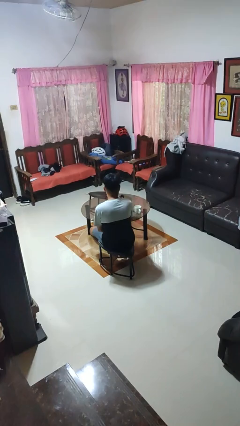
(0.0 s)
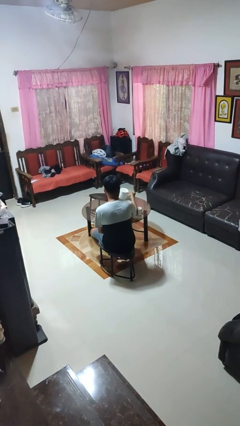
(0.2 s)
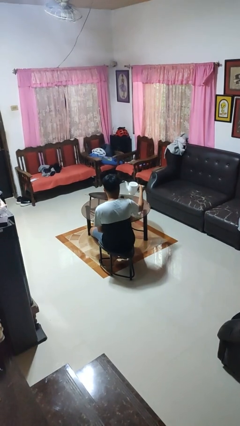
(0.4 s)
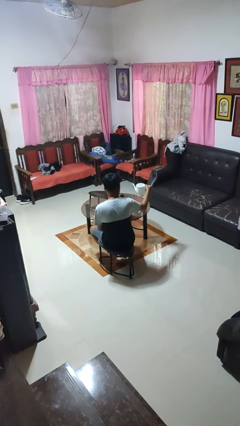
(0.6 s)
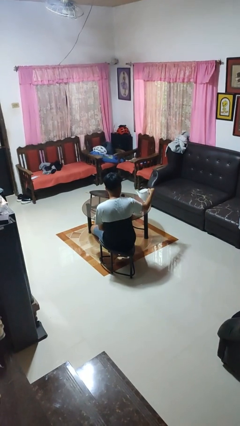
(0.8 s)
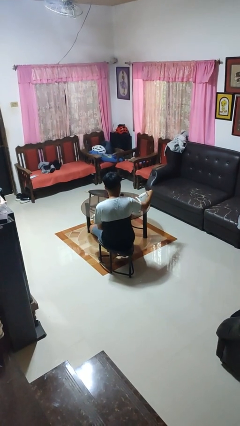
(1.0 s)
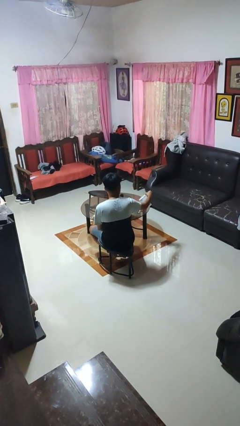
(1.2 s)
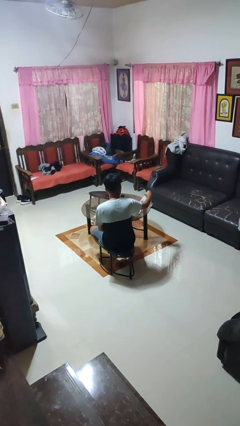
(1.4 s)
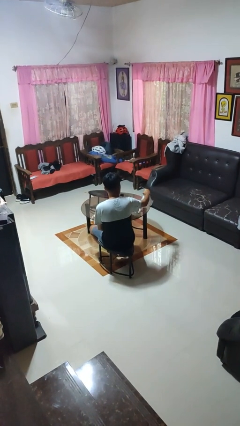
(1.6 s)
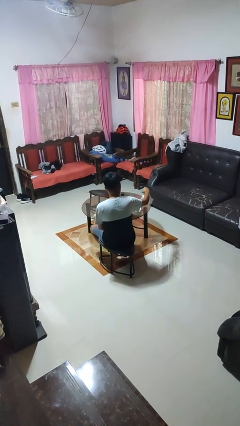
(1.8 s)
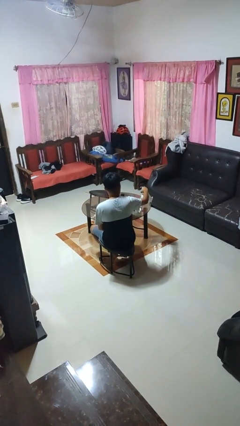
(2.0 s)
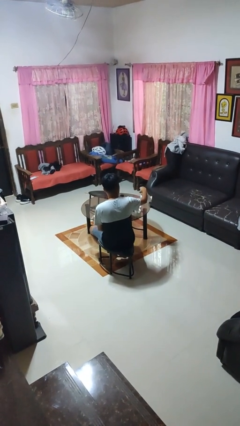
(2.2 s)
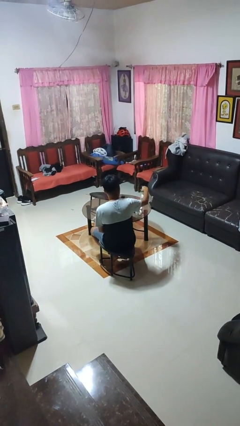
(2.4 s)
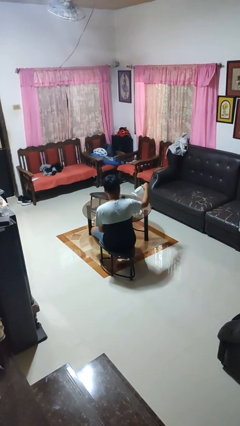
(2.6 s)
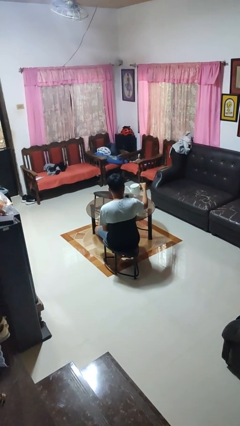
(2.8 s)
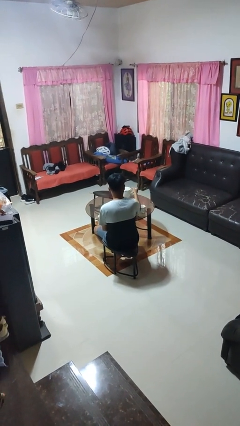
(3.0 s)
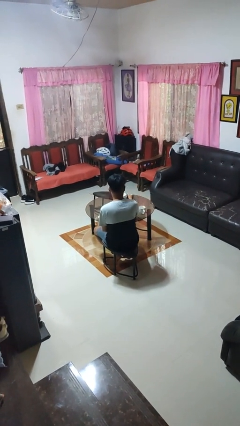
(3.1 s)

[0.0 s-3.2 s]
person pours coffee into mug

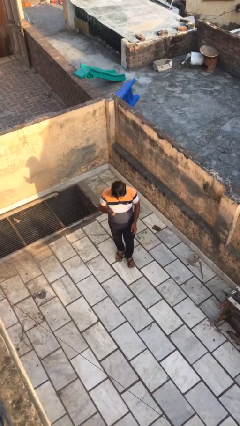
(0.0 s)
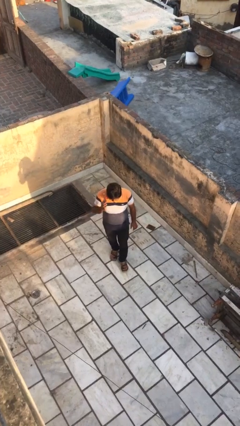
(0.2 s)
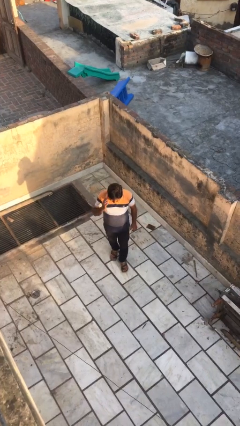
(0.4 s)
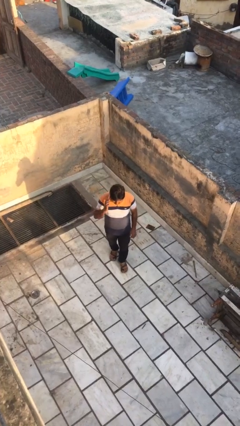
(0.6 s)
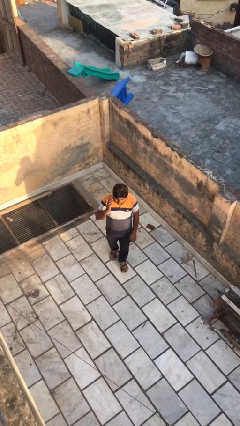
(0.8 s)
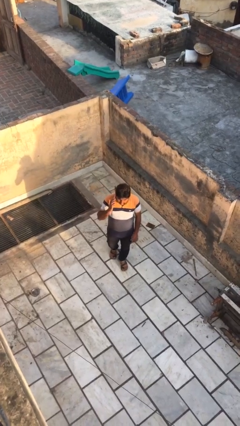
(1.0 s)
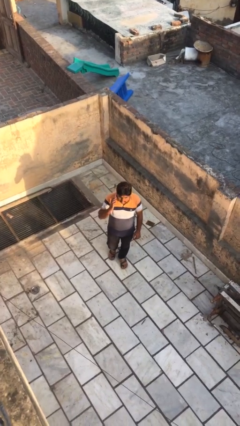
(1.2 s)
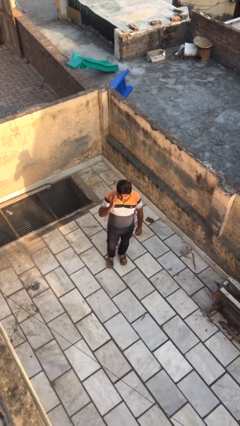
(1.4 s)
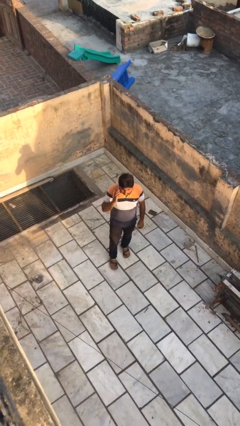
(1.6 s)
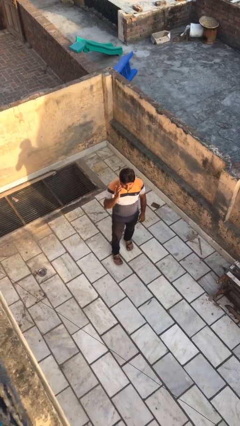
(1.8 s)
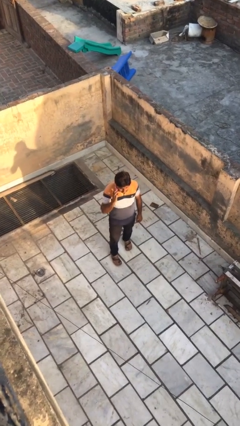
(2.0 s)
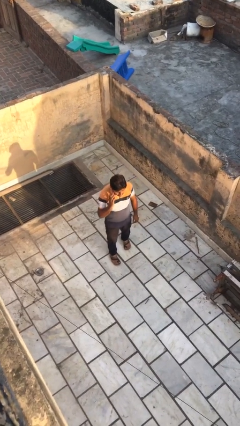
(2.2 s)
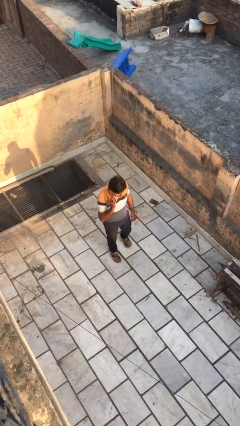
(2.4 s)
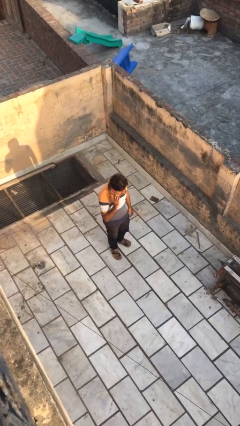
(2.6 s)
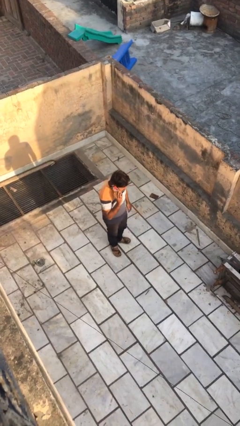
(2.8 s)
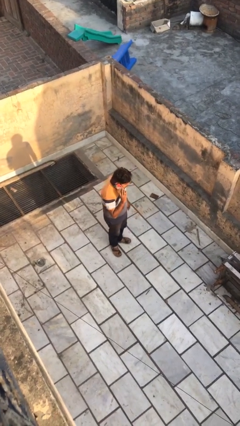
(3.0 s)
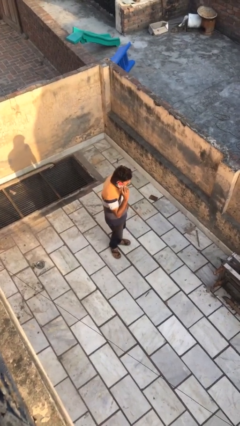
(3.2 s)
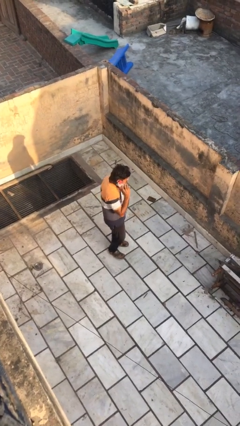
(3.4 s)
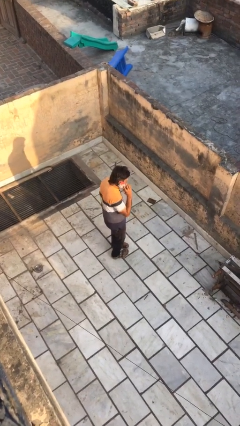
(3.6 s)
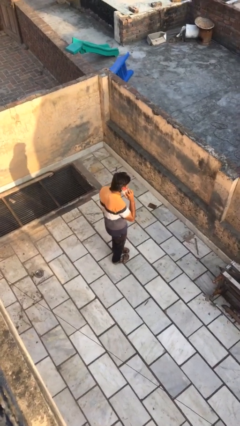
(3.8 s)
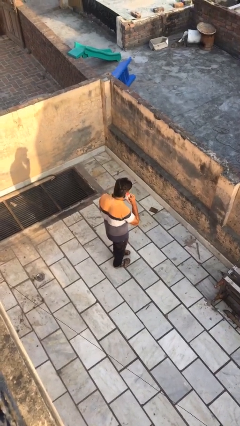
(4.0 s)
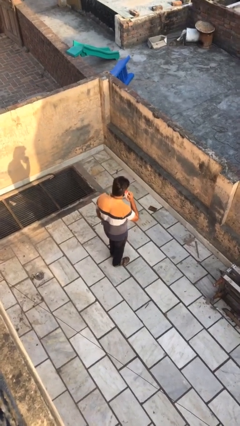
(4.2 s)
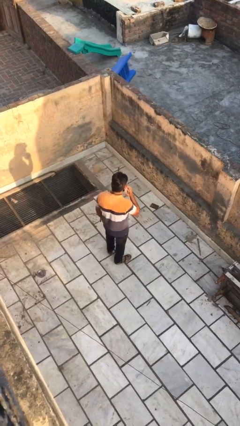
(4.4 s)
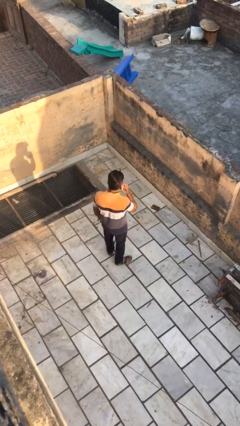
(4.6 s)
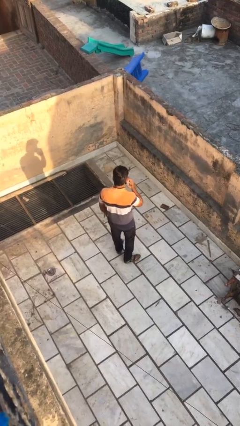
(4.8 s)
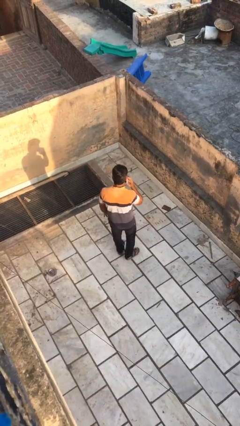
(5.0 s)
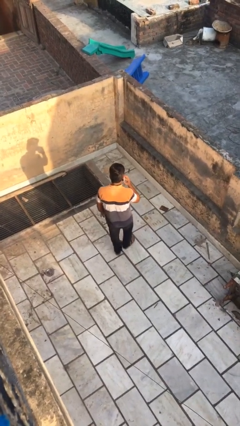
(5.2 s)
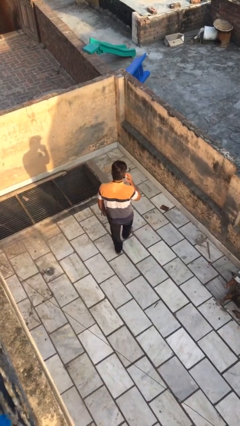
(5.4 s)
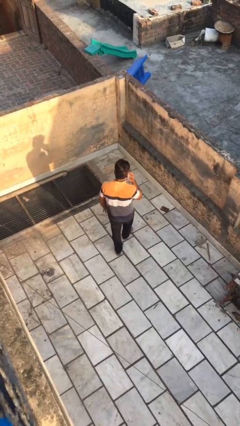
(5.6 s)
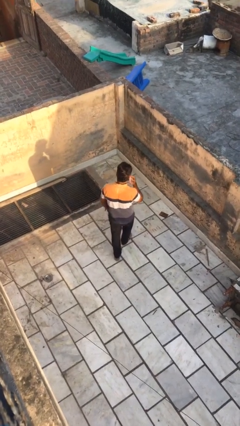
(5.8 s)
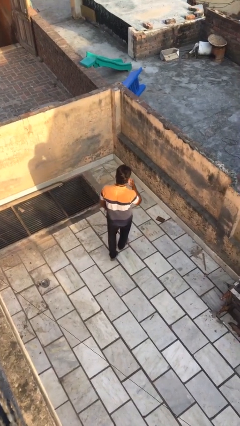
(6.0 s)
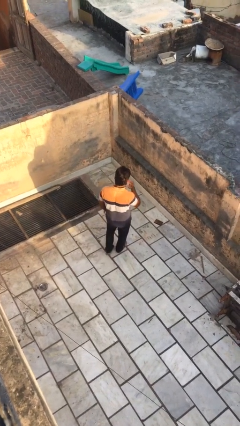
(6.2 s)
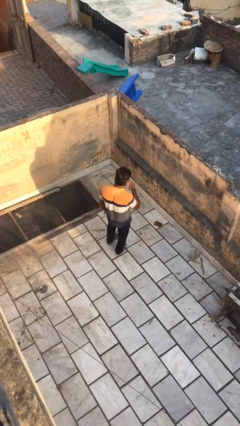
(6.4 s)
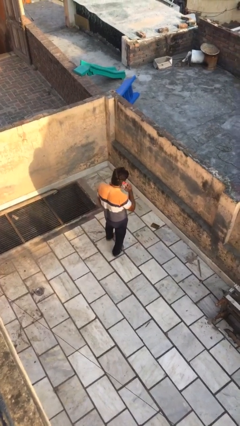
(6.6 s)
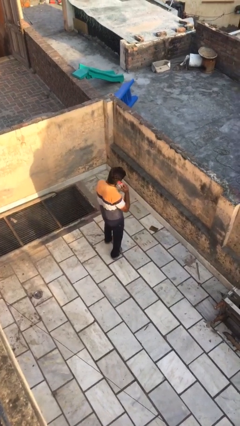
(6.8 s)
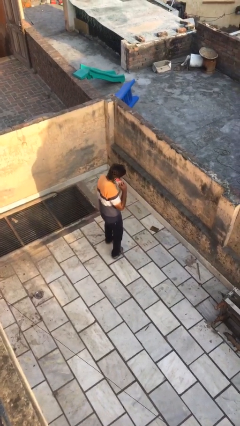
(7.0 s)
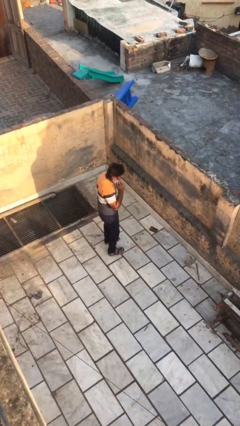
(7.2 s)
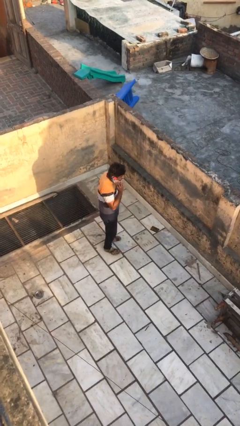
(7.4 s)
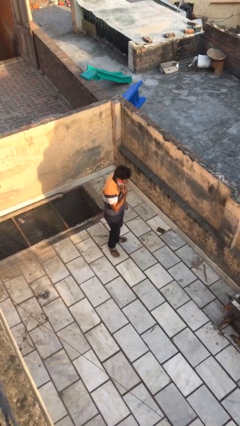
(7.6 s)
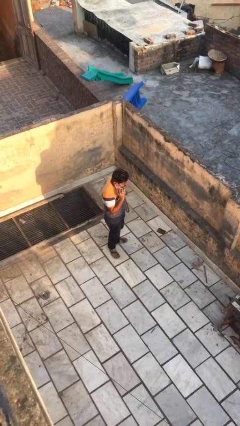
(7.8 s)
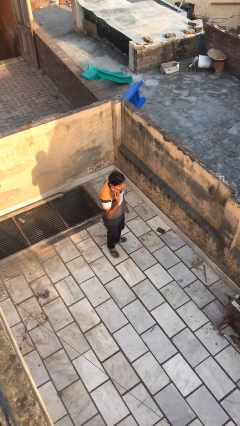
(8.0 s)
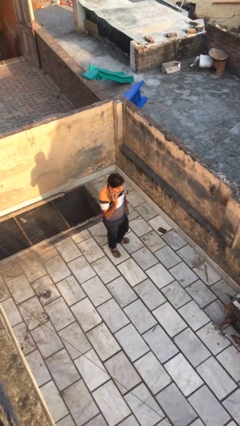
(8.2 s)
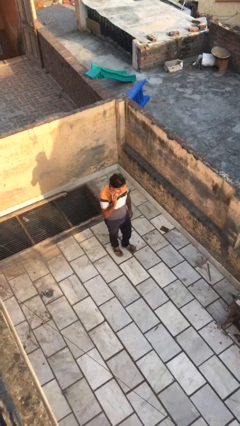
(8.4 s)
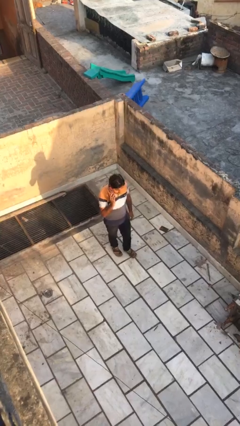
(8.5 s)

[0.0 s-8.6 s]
person talks on phone

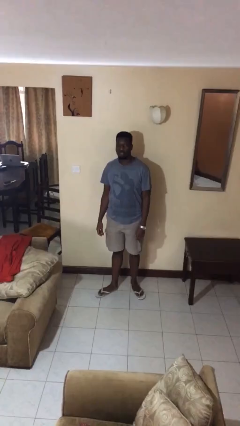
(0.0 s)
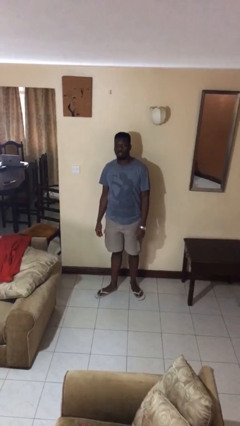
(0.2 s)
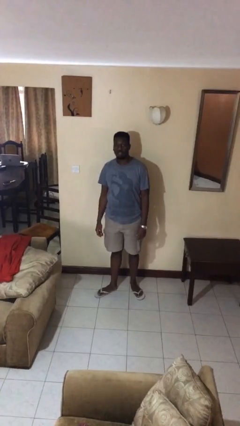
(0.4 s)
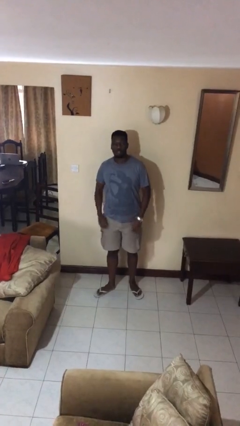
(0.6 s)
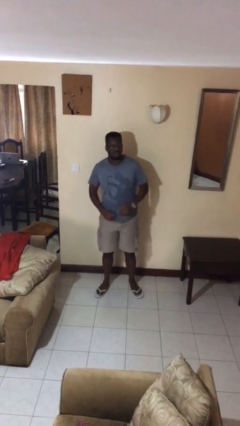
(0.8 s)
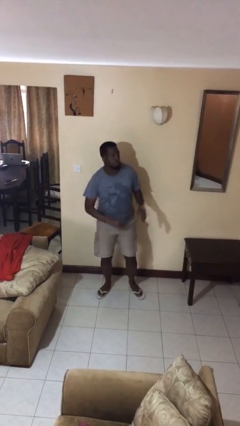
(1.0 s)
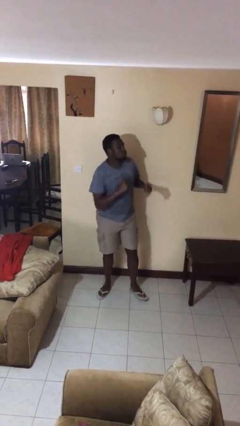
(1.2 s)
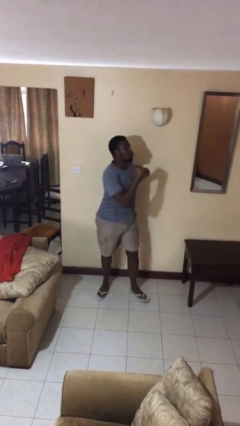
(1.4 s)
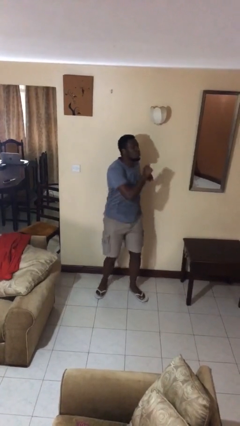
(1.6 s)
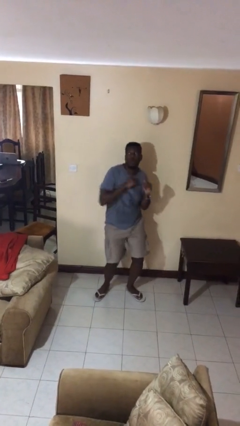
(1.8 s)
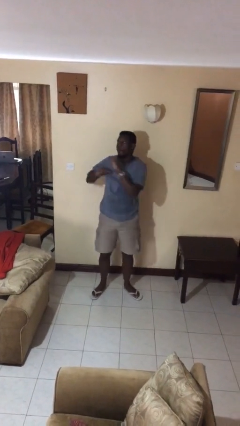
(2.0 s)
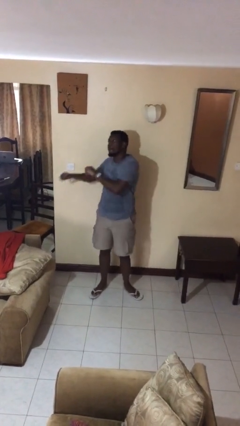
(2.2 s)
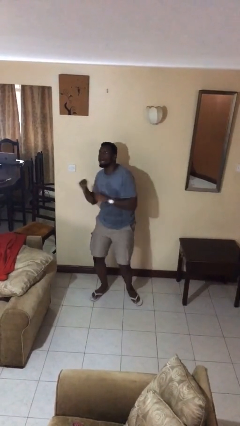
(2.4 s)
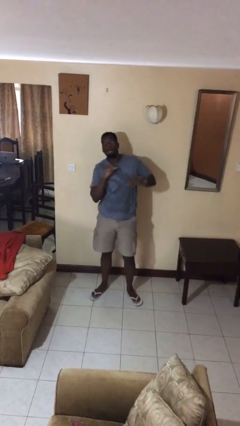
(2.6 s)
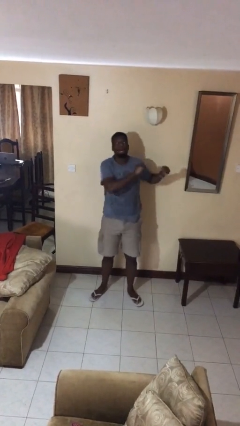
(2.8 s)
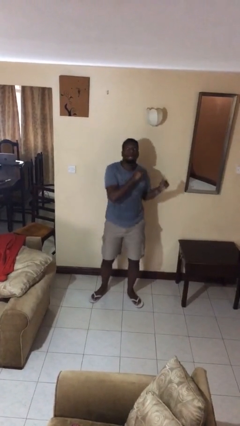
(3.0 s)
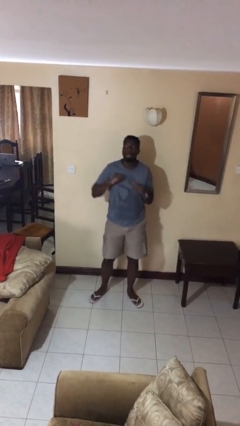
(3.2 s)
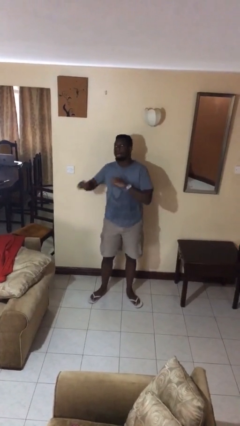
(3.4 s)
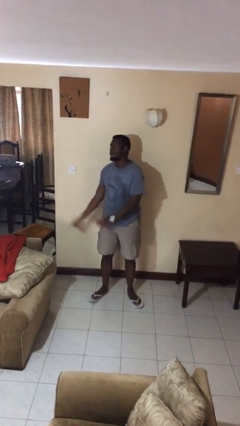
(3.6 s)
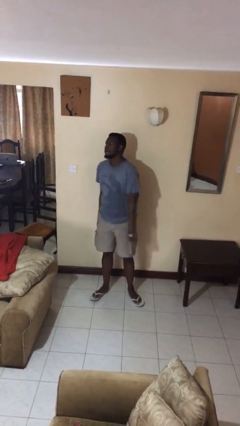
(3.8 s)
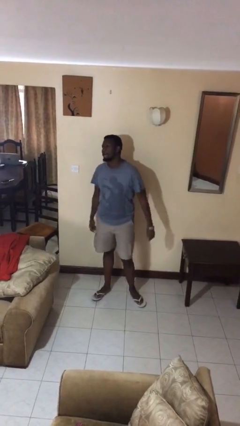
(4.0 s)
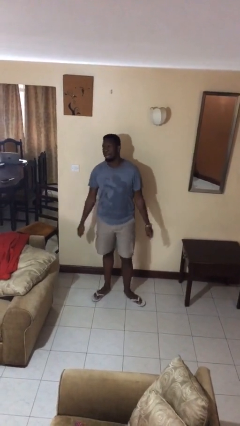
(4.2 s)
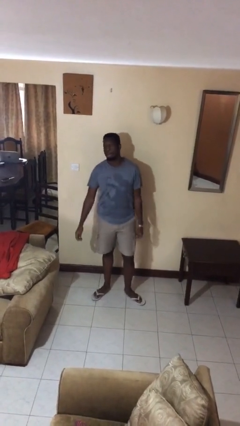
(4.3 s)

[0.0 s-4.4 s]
person dances in place

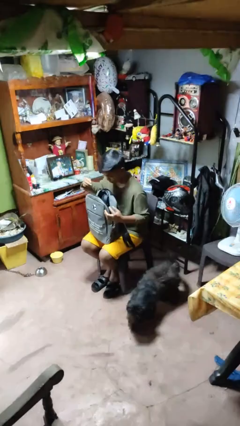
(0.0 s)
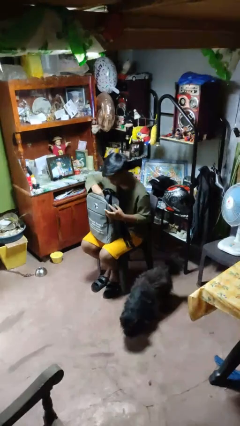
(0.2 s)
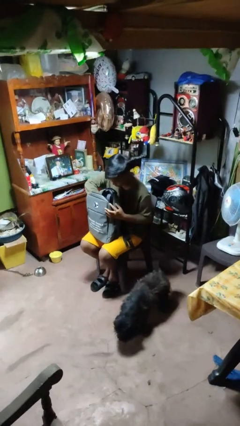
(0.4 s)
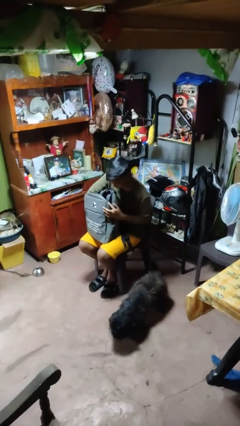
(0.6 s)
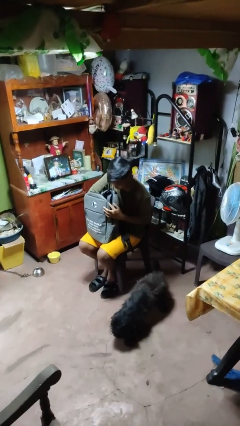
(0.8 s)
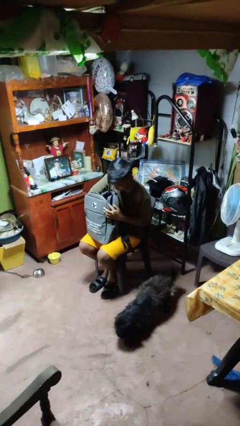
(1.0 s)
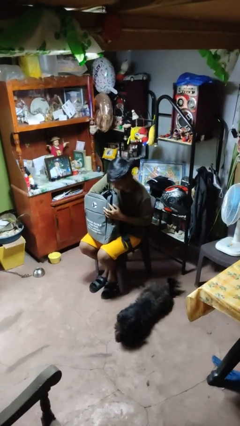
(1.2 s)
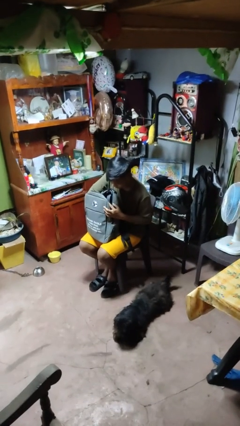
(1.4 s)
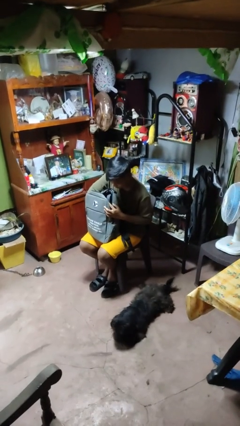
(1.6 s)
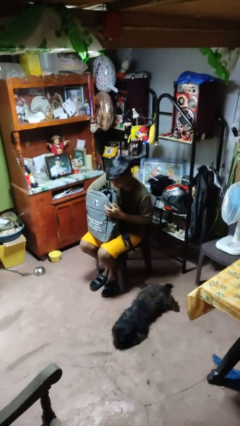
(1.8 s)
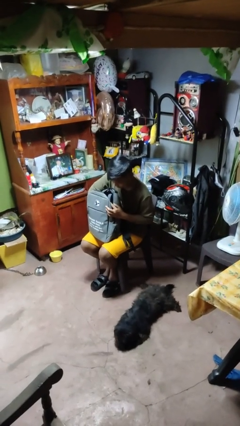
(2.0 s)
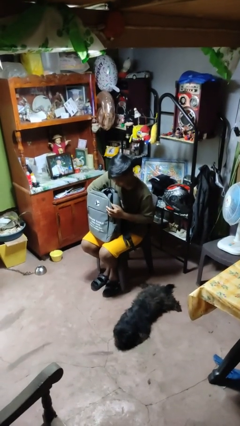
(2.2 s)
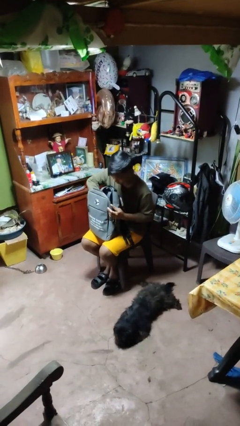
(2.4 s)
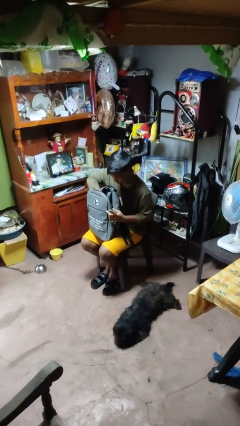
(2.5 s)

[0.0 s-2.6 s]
person searches in backpack
